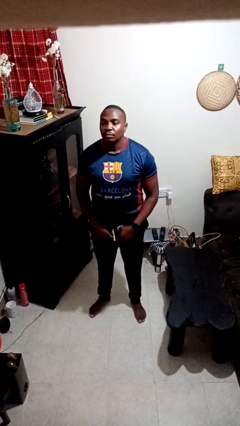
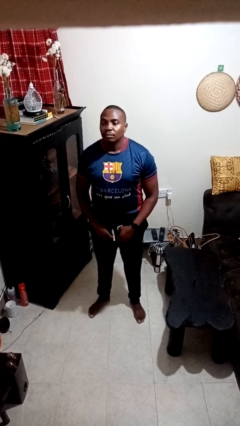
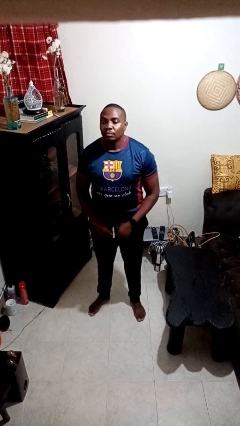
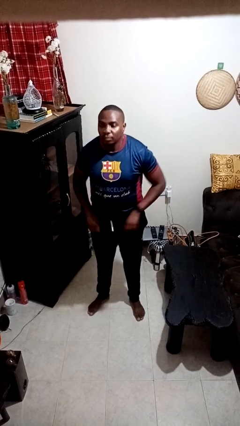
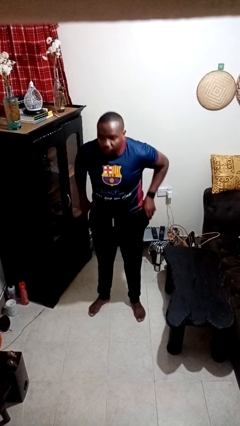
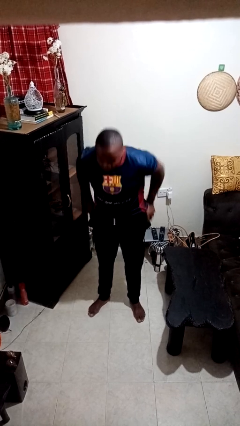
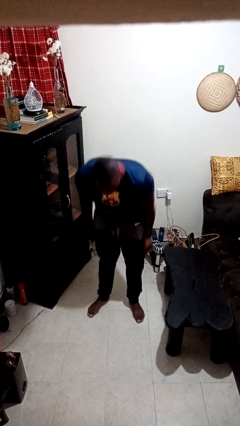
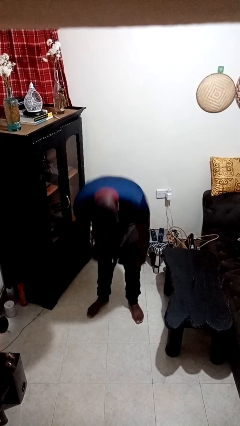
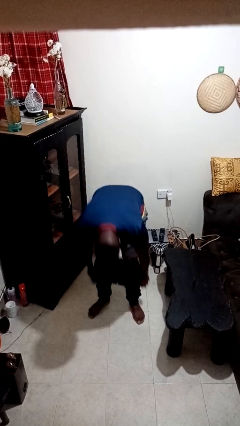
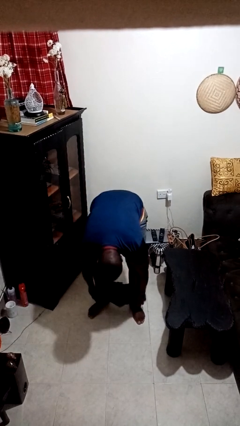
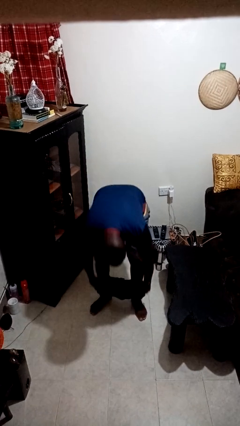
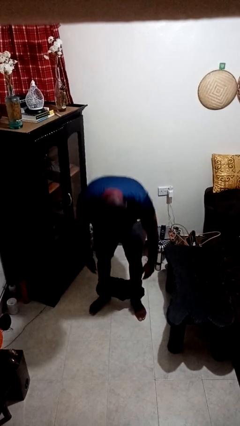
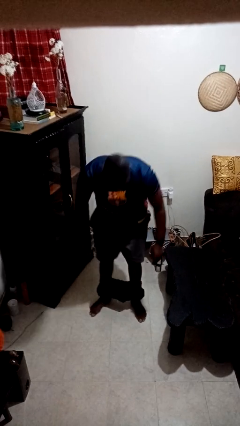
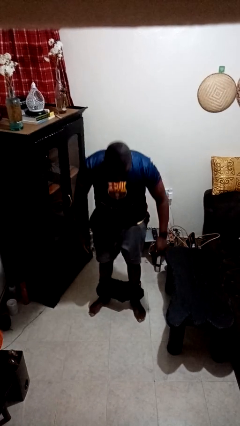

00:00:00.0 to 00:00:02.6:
person takes off pants

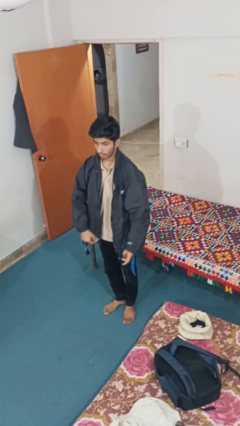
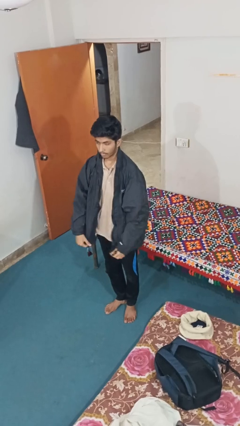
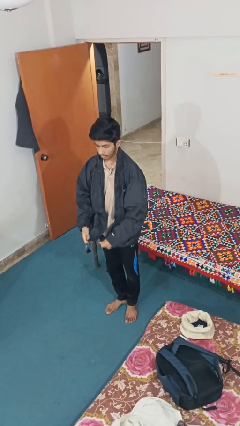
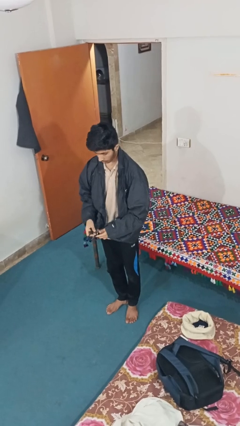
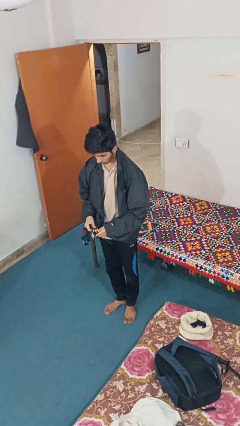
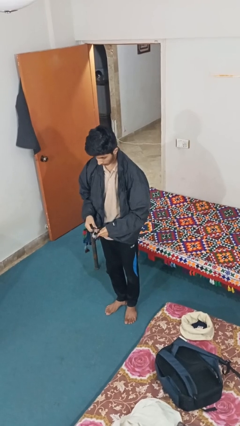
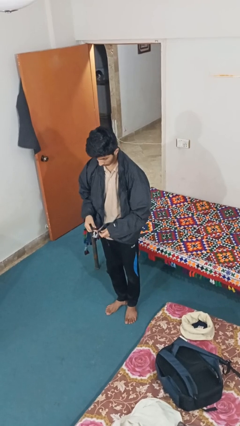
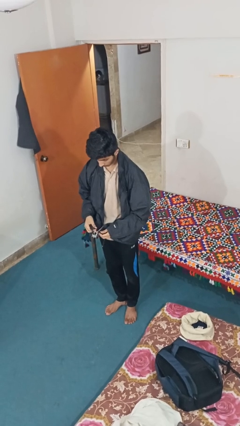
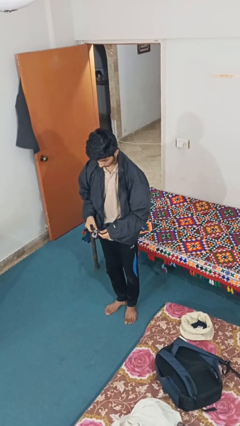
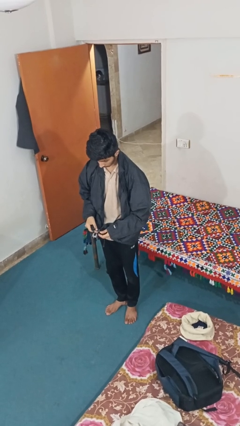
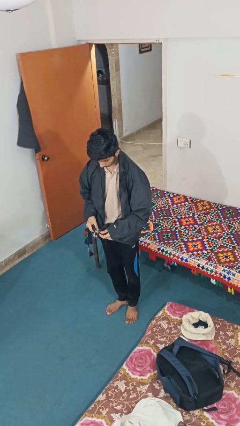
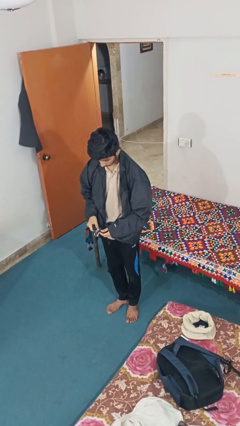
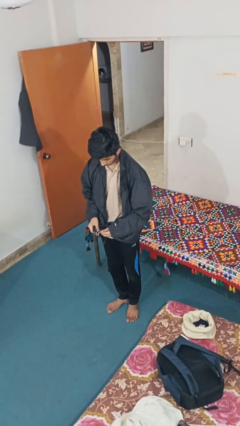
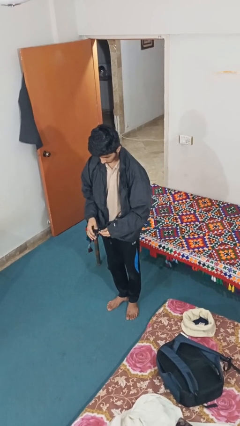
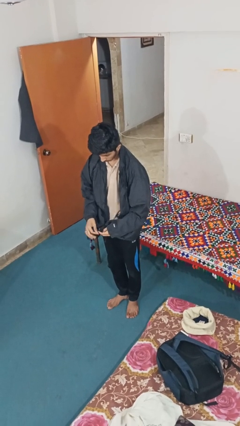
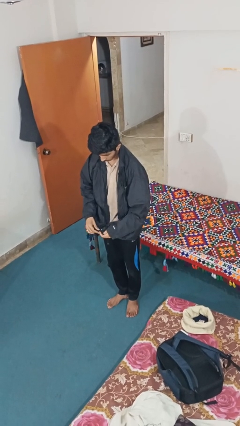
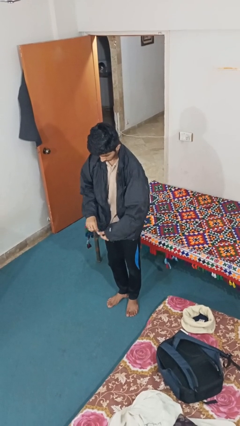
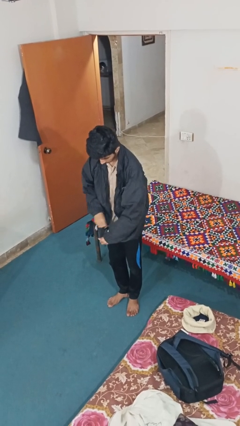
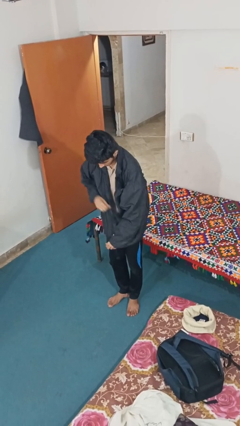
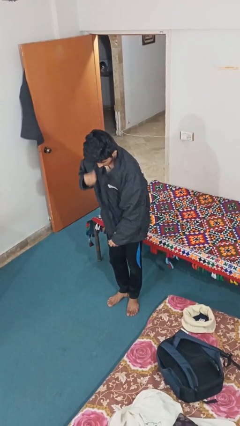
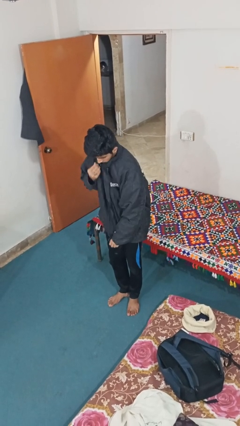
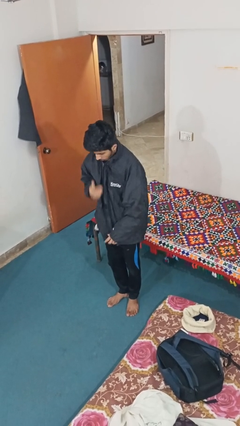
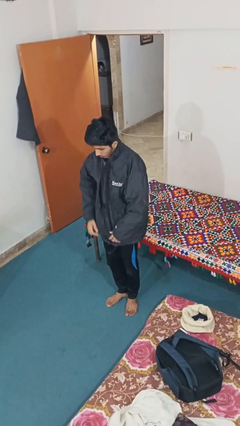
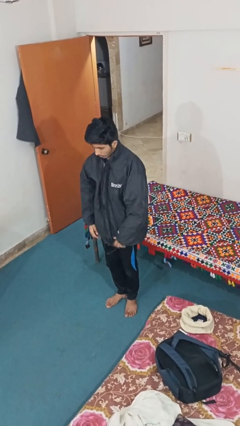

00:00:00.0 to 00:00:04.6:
person zips up jacket

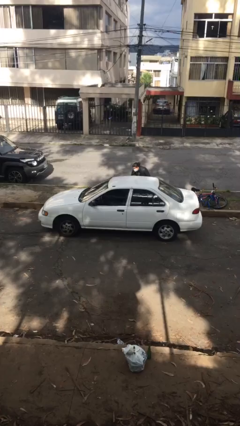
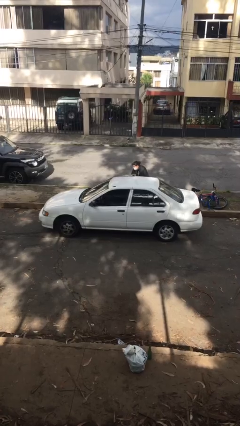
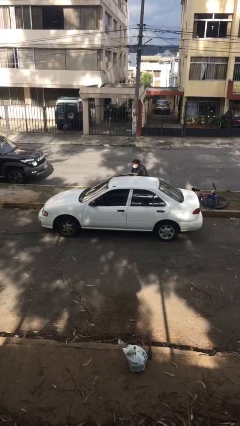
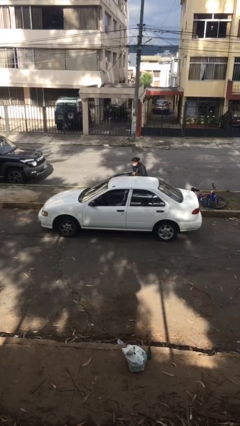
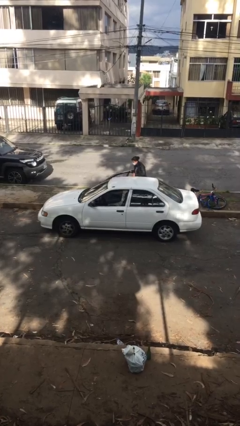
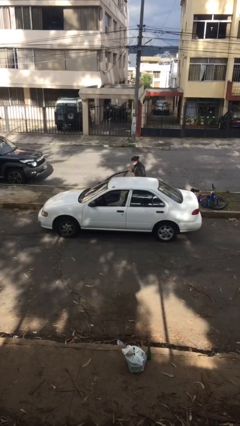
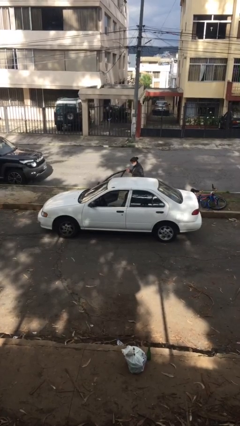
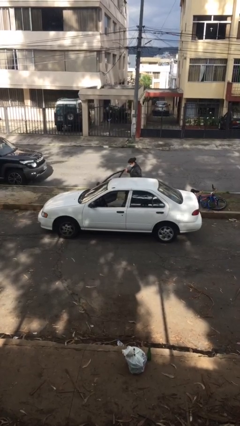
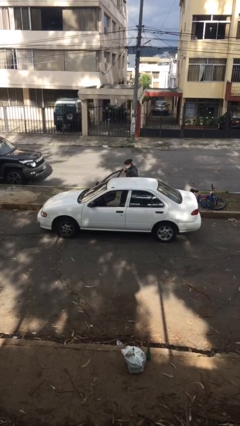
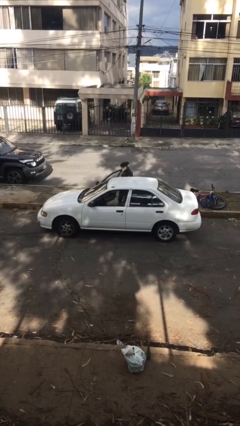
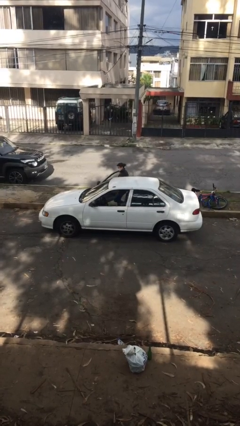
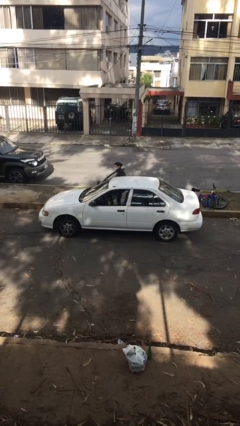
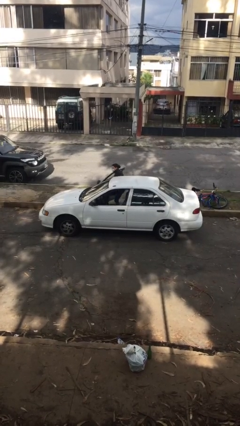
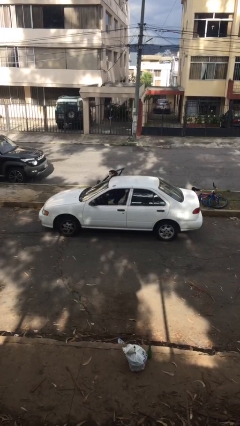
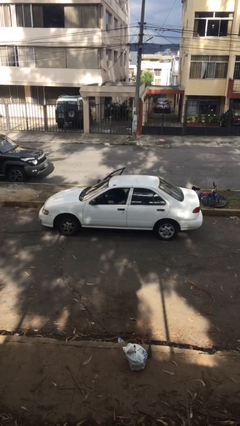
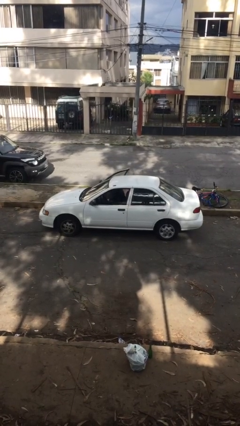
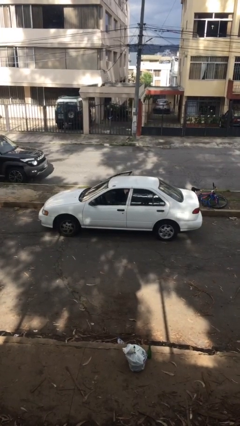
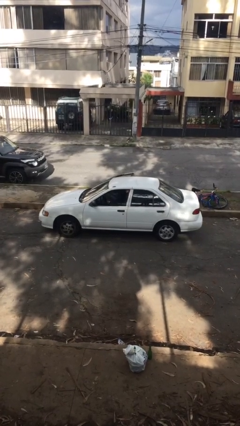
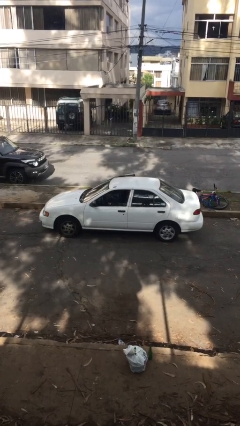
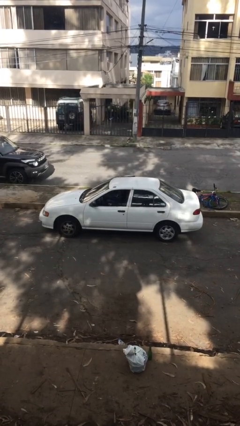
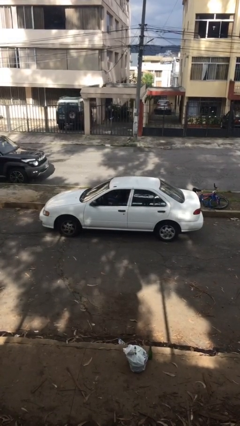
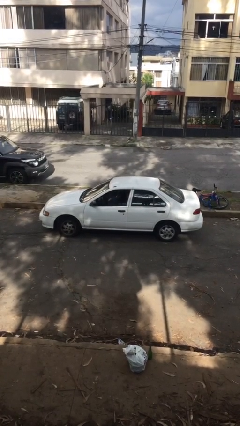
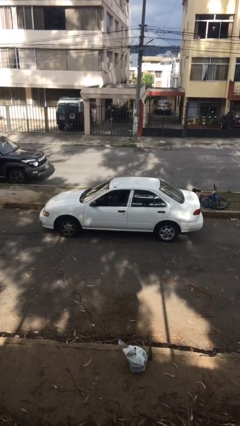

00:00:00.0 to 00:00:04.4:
car picks up person

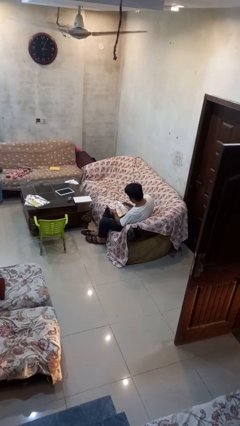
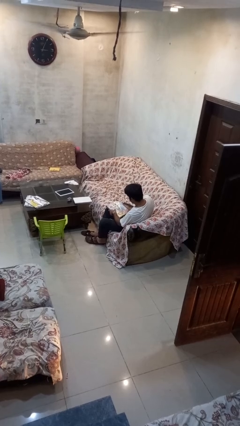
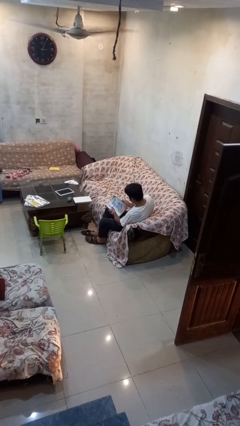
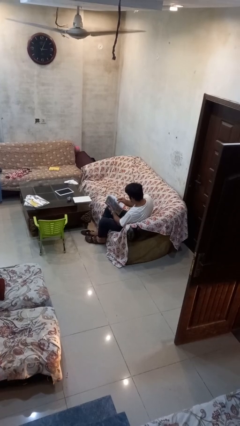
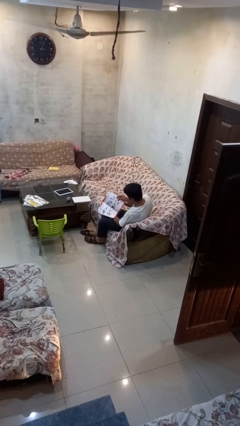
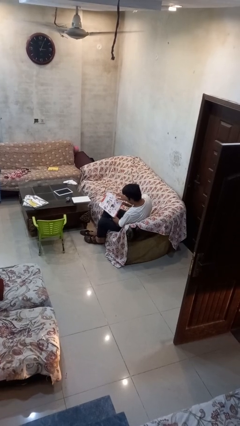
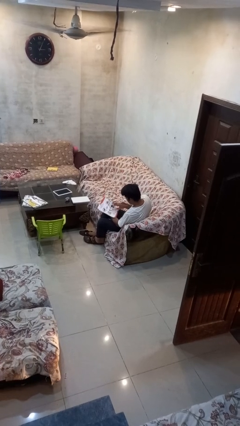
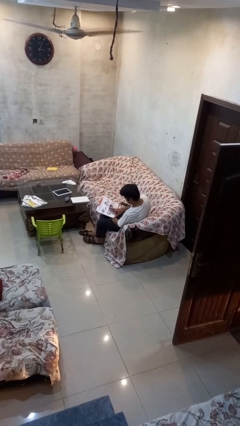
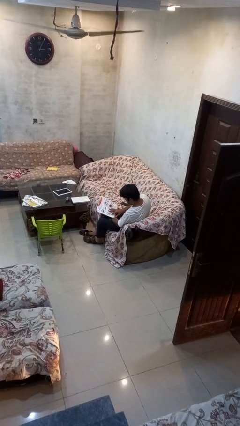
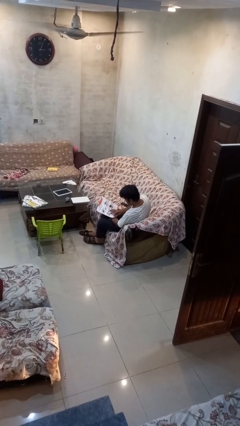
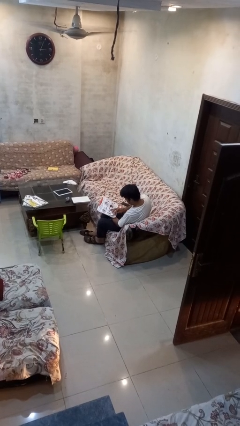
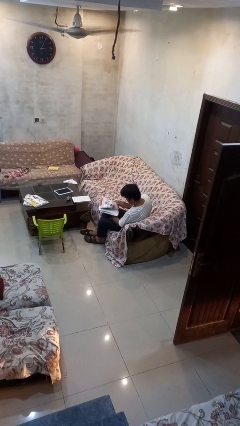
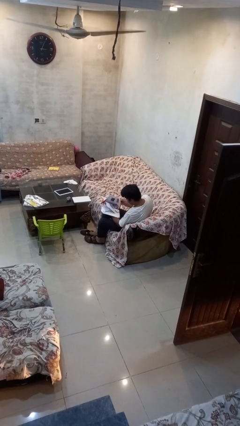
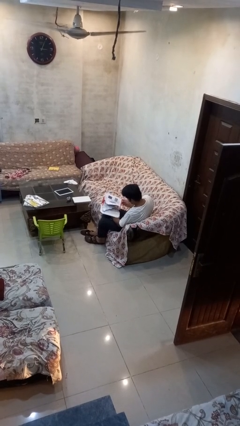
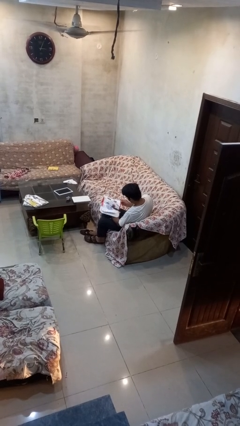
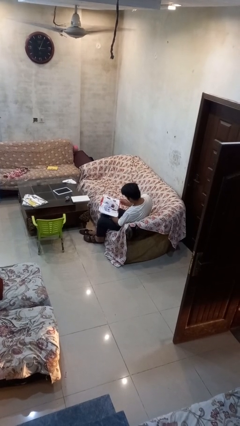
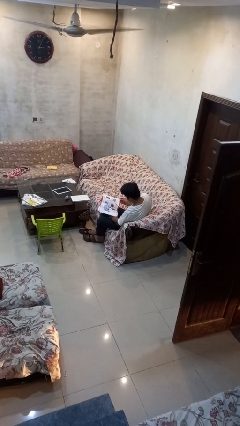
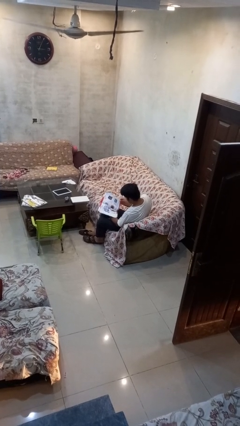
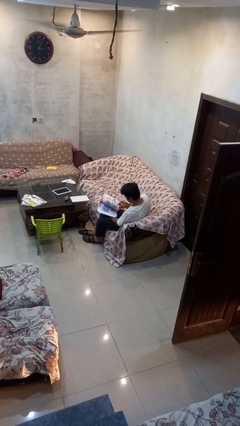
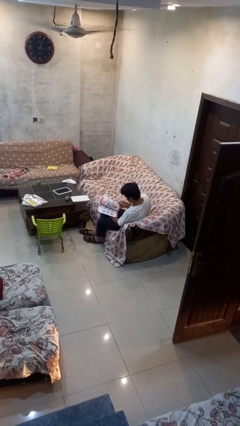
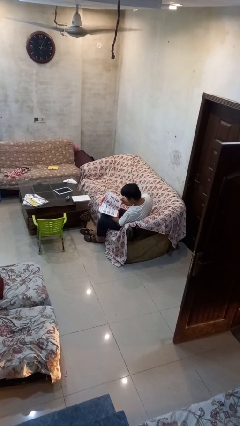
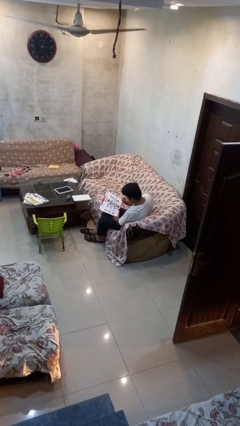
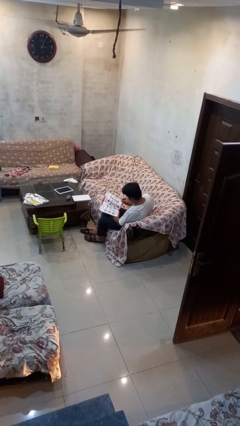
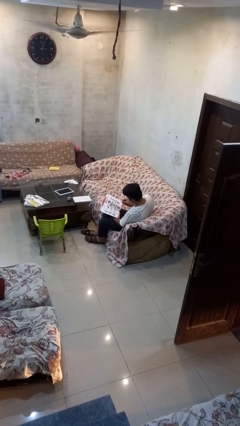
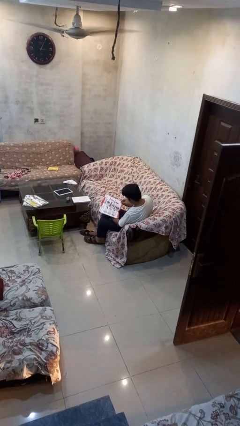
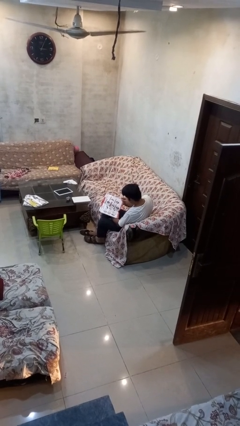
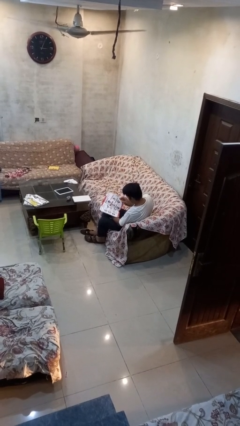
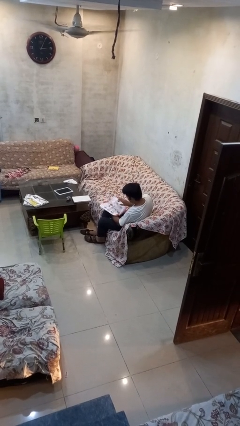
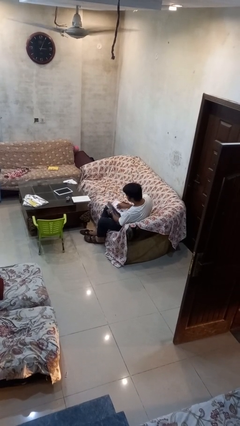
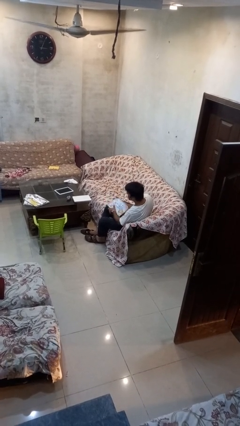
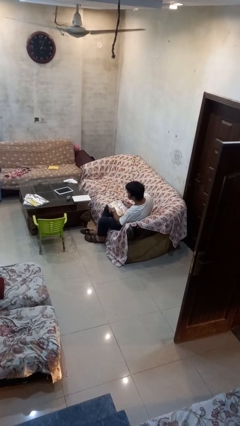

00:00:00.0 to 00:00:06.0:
person reads book

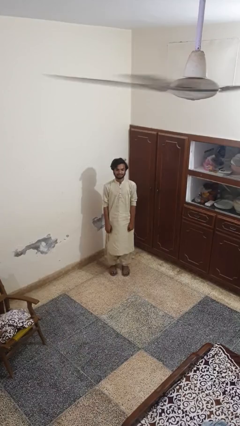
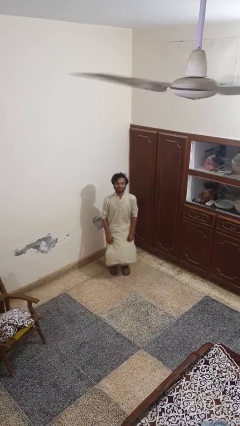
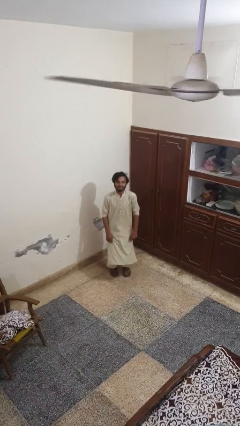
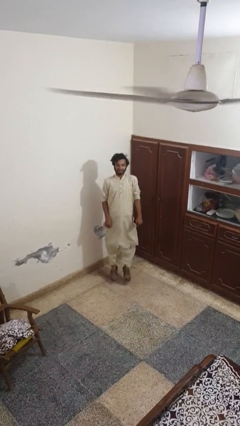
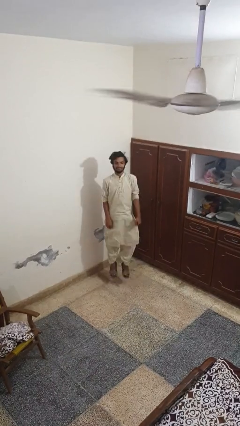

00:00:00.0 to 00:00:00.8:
person jumps
